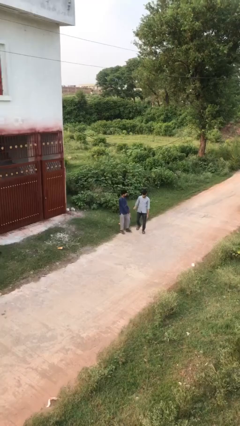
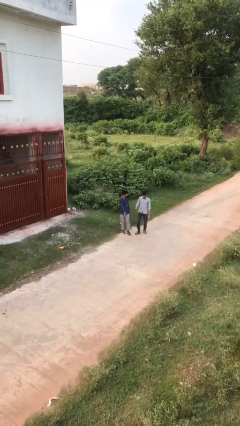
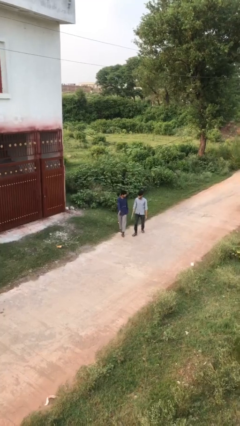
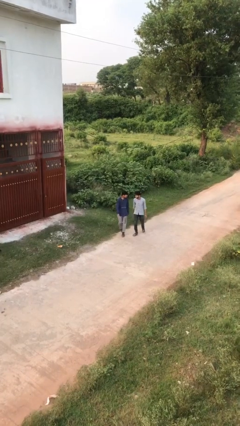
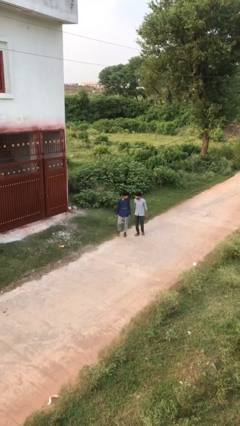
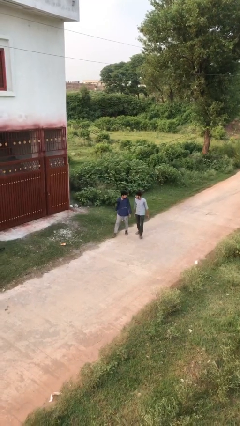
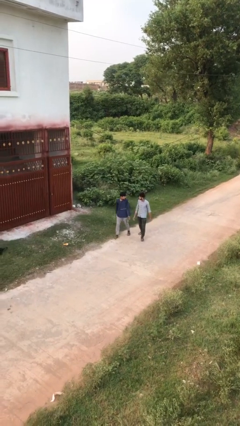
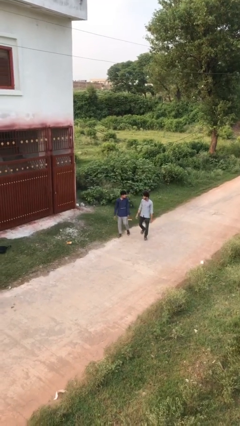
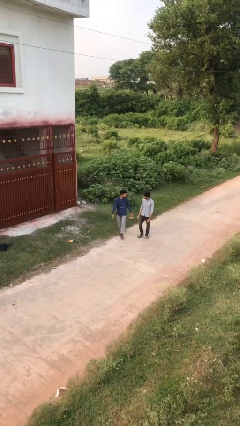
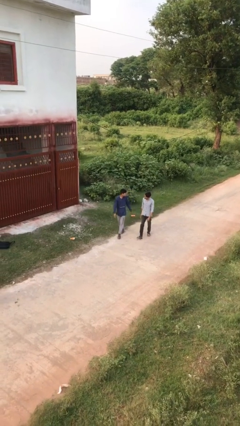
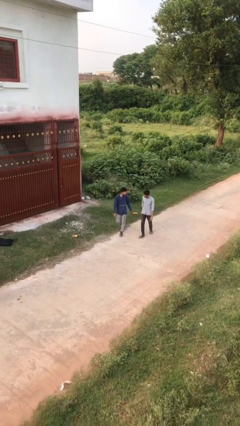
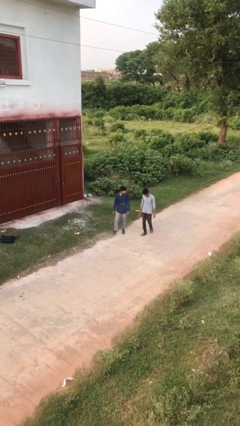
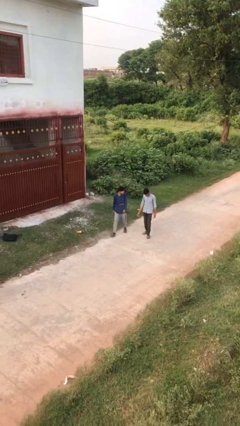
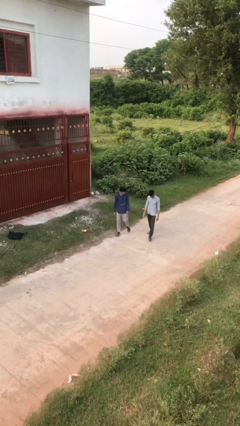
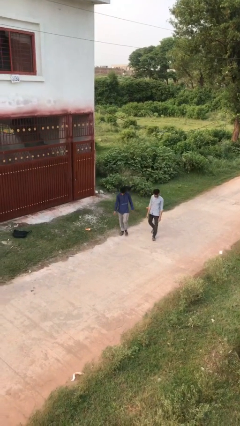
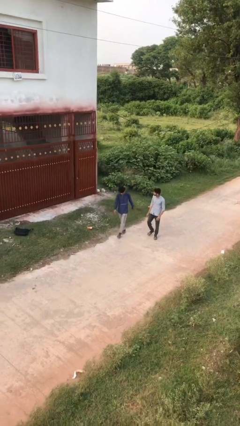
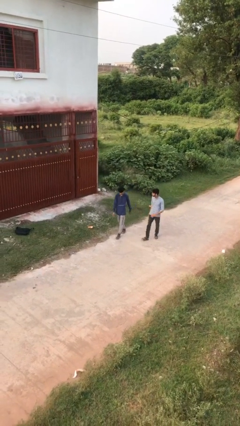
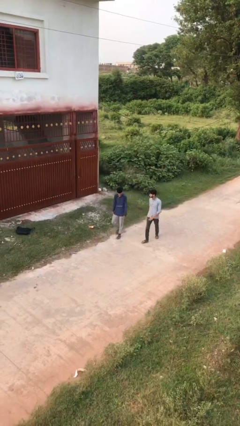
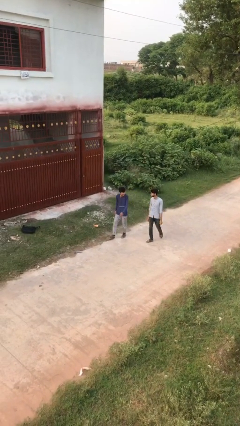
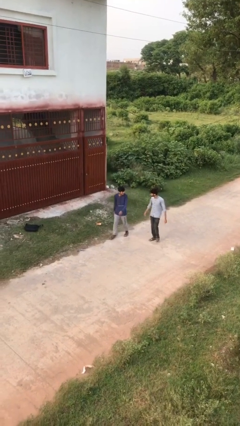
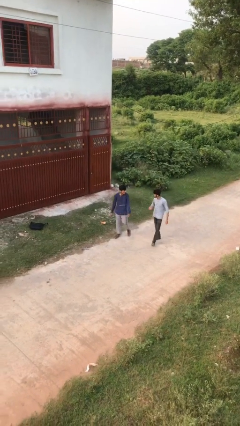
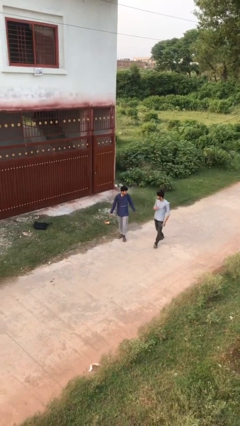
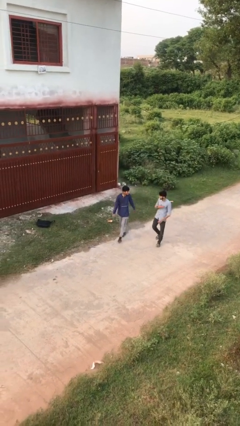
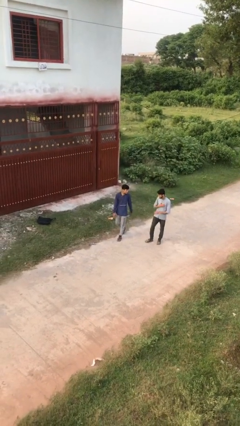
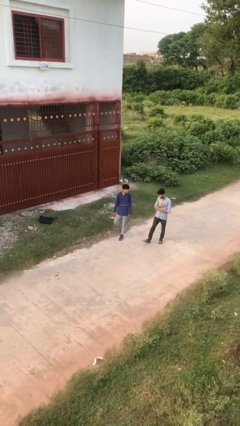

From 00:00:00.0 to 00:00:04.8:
person talks to person

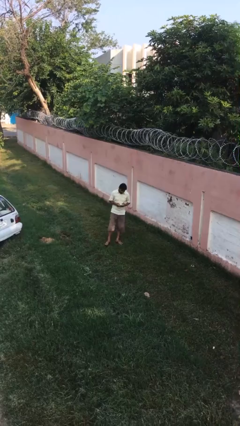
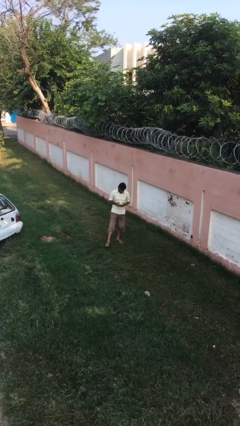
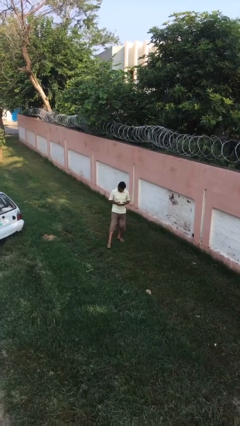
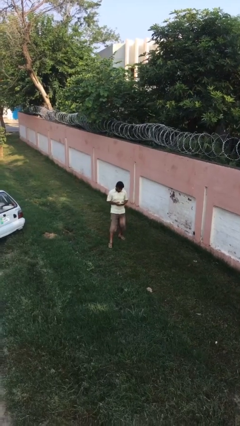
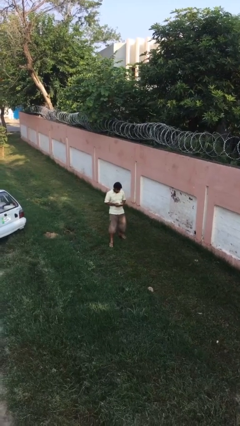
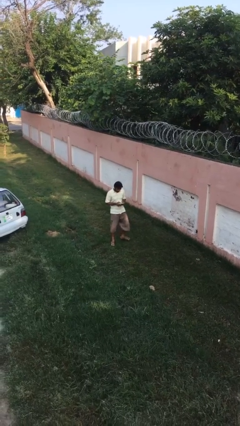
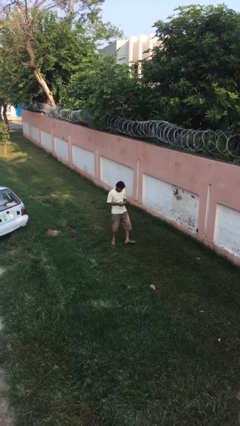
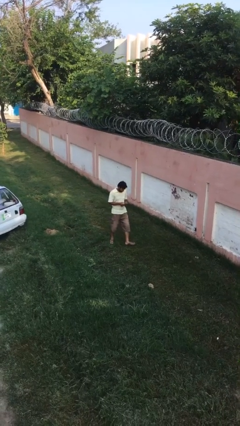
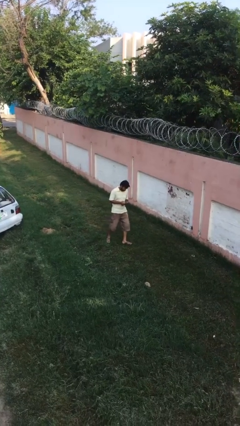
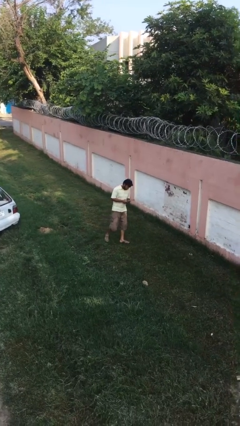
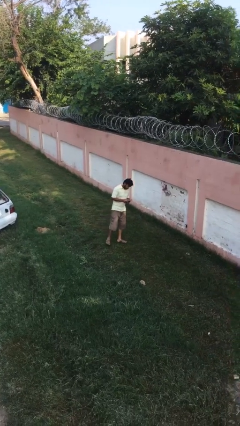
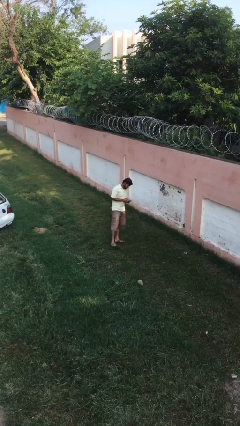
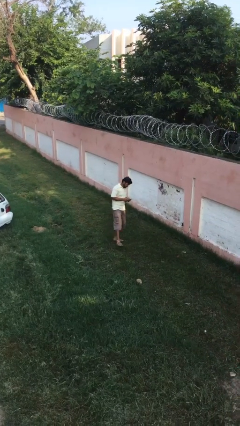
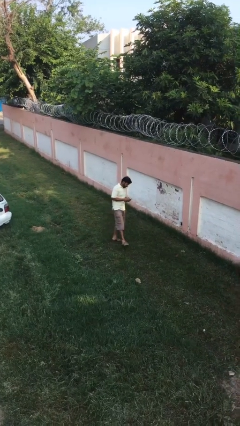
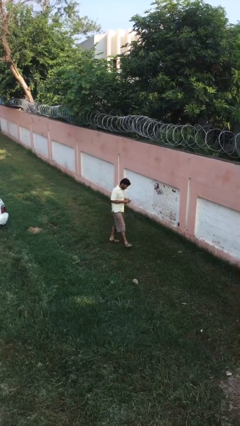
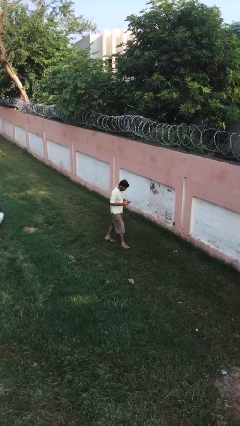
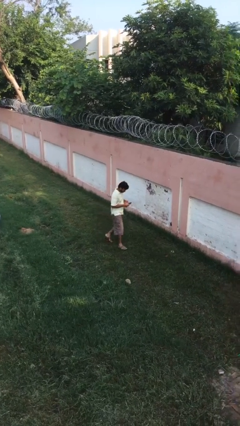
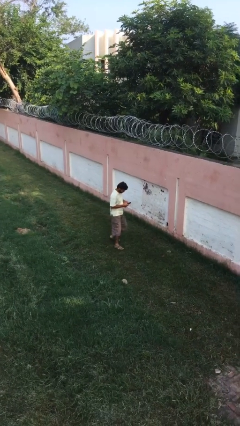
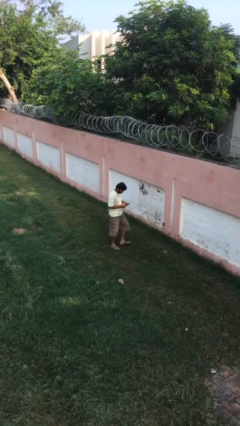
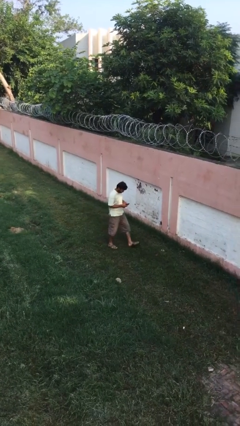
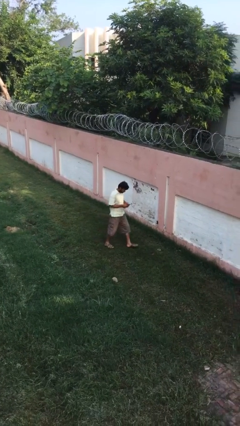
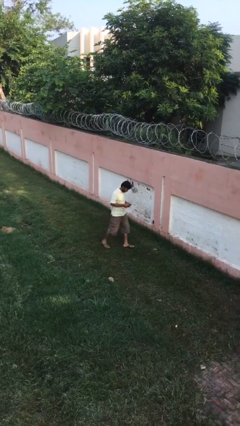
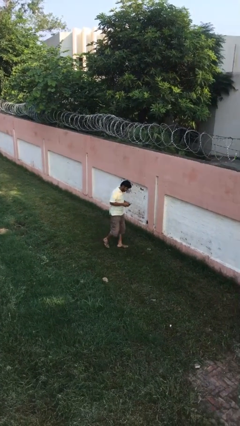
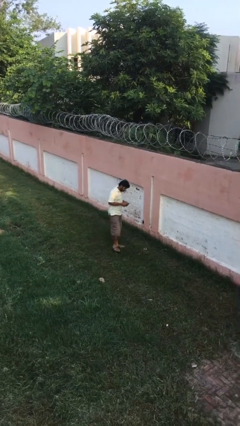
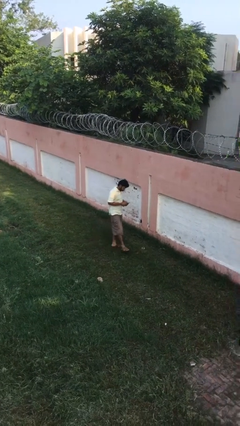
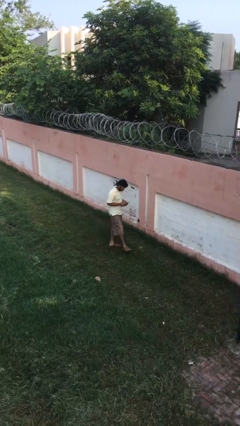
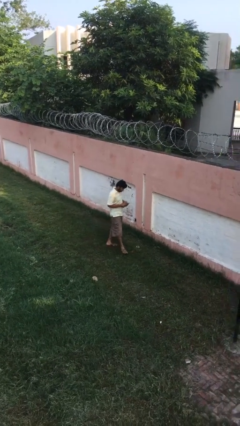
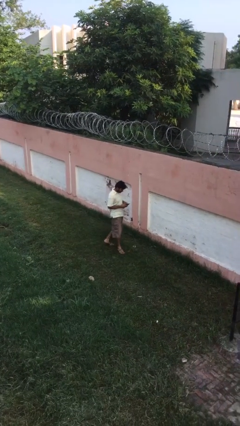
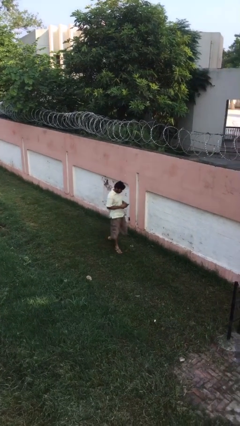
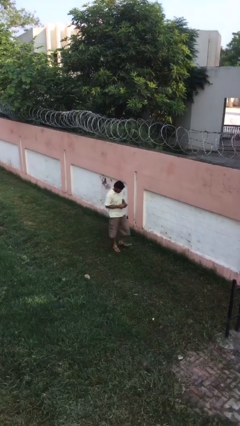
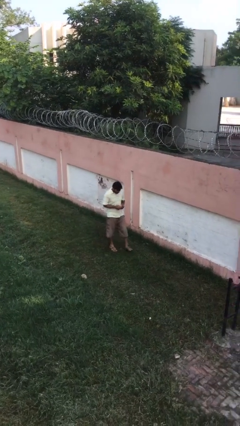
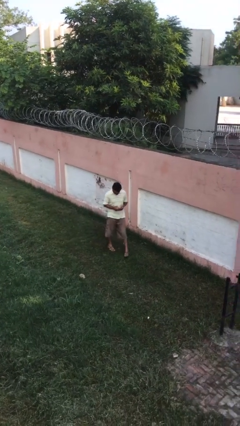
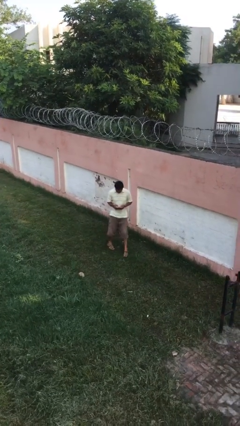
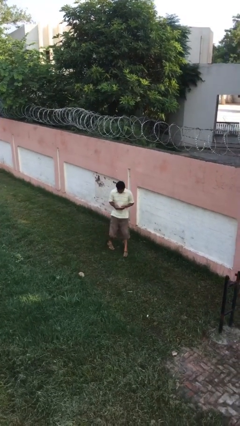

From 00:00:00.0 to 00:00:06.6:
person texts on phone

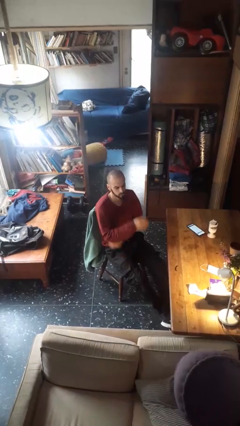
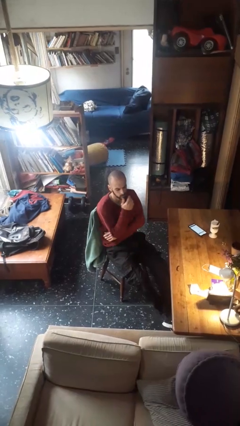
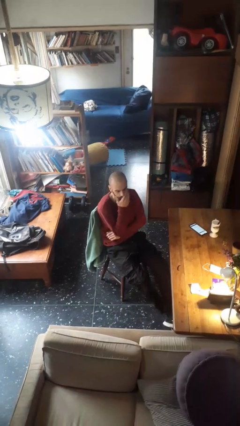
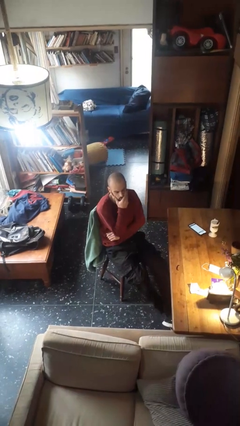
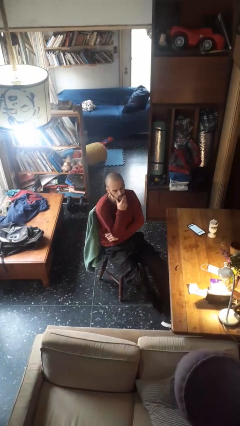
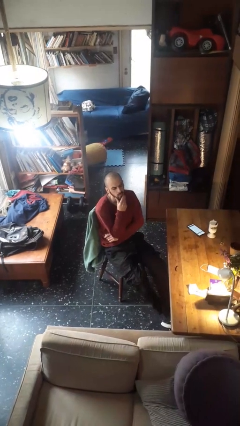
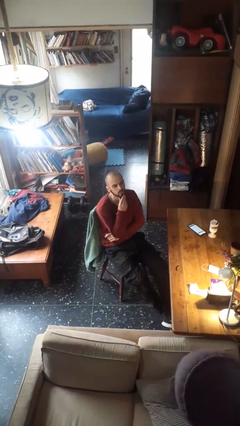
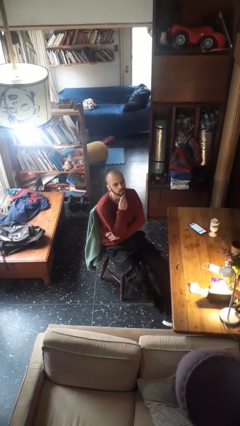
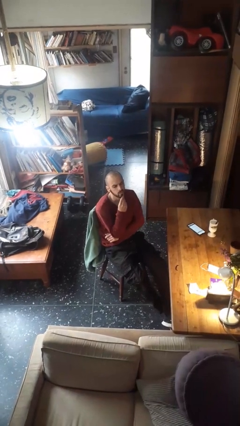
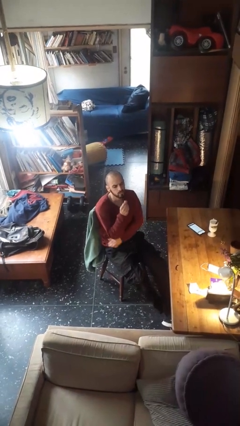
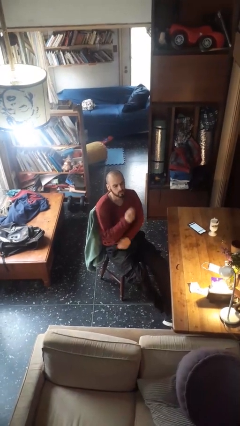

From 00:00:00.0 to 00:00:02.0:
person strokes chin

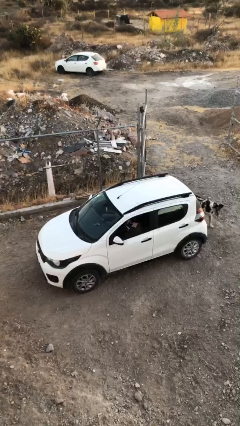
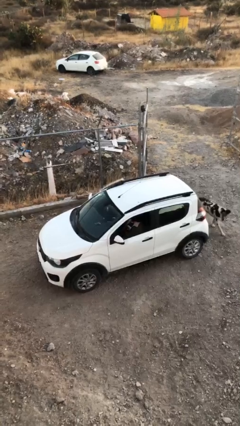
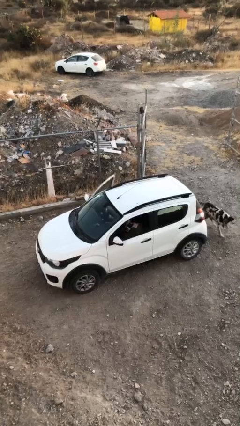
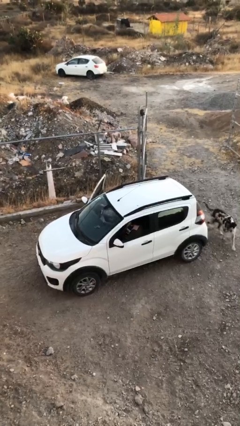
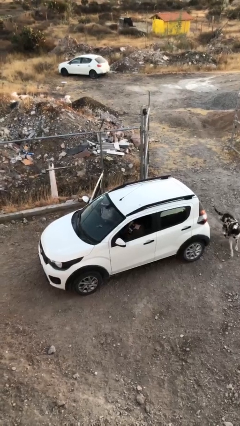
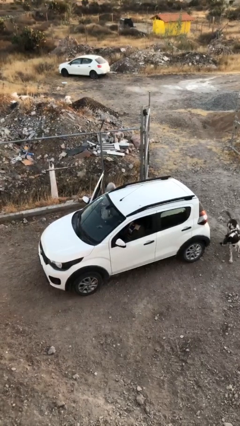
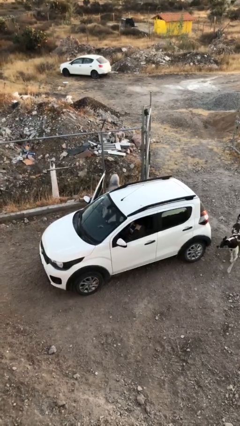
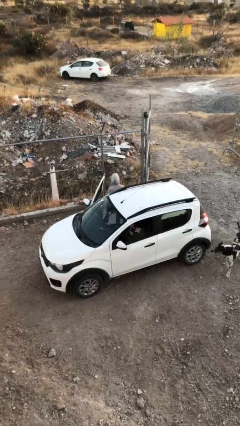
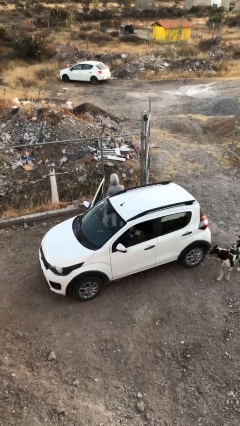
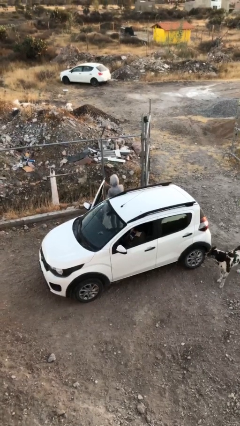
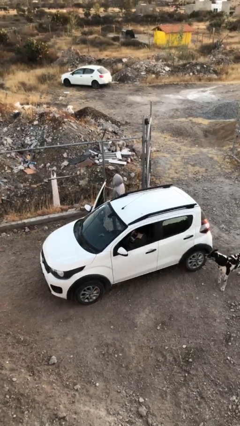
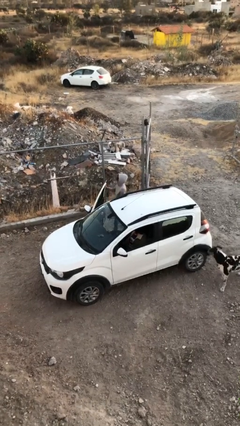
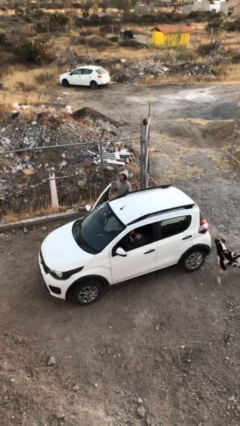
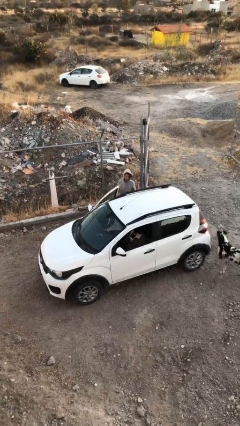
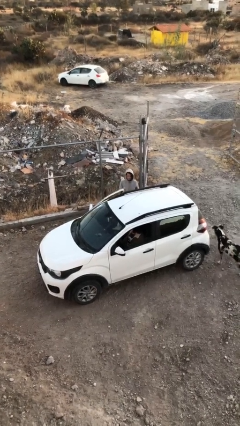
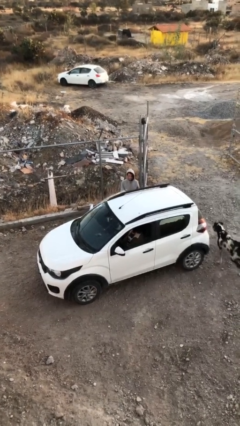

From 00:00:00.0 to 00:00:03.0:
car drops off person

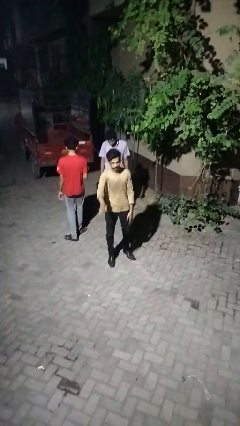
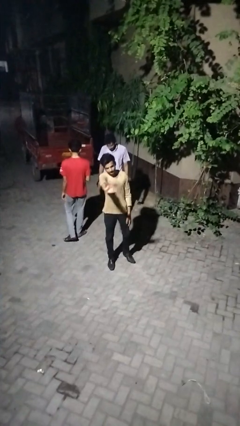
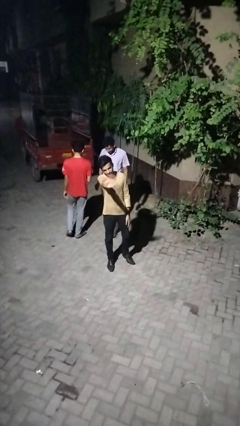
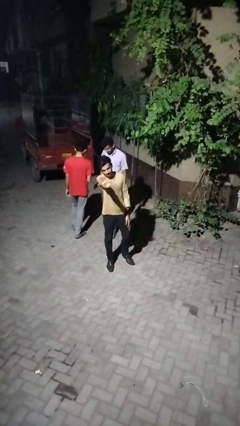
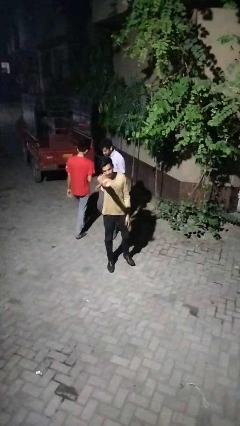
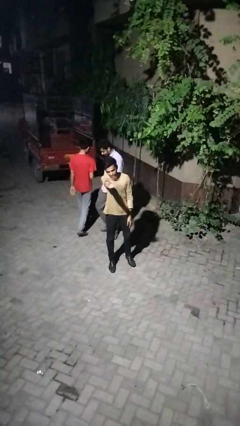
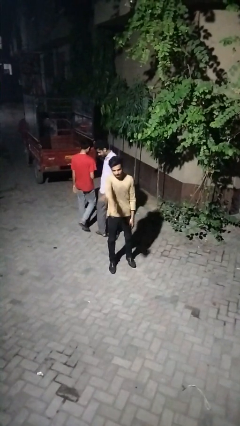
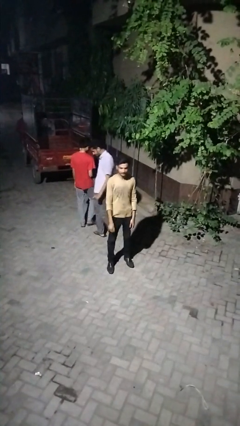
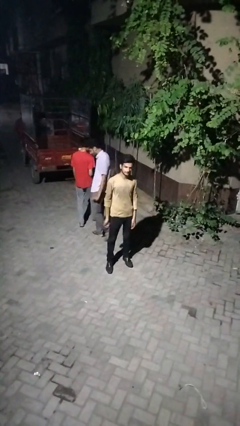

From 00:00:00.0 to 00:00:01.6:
person waves at person
